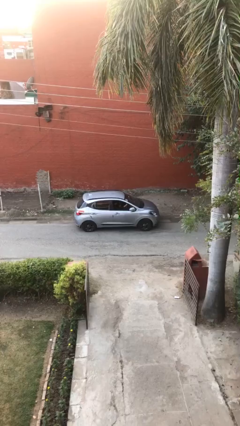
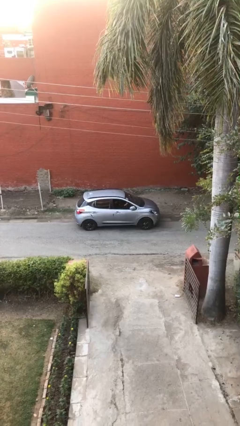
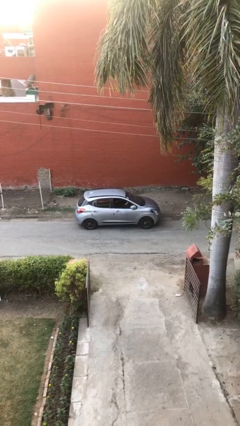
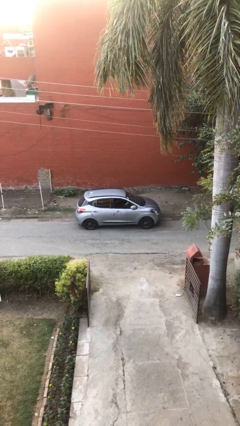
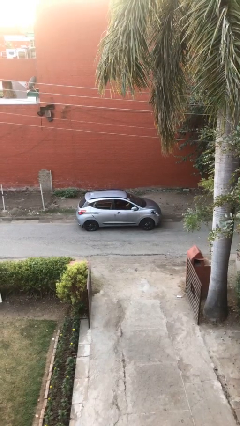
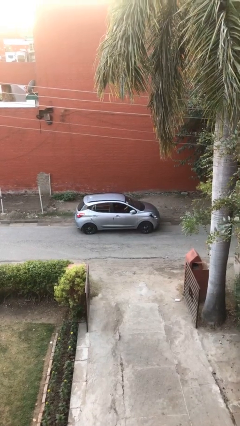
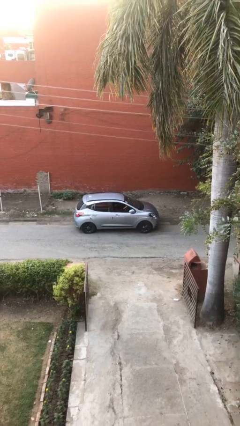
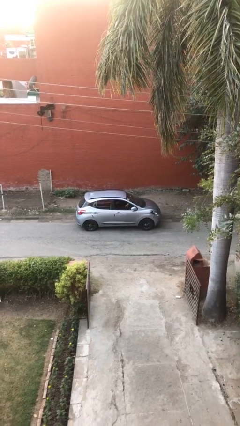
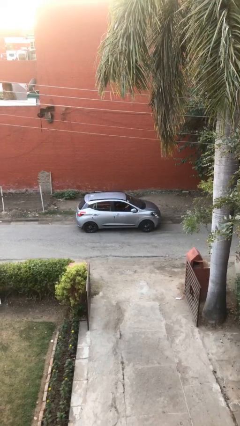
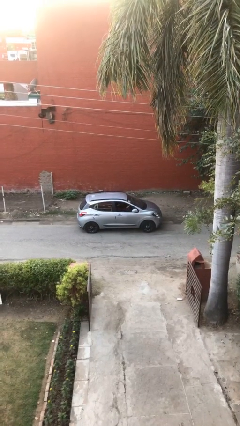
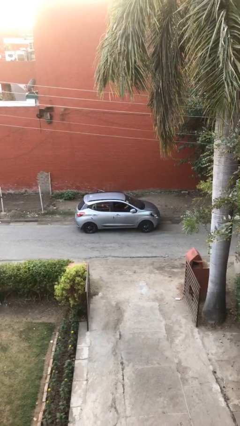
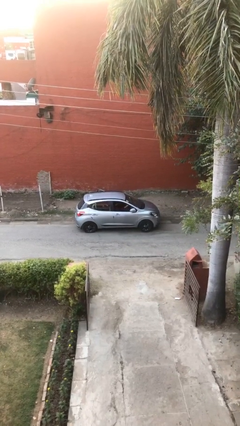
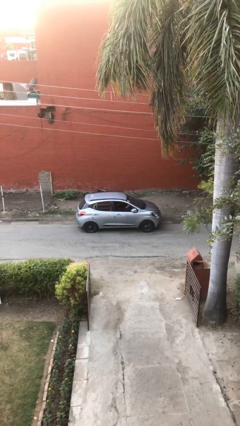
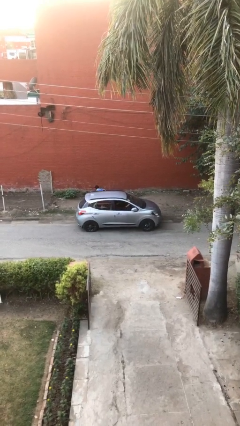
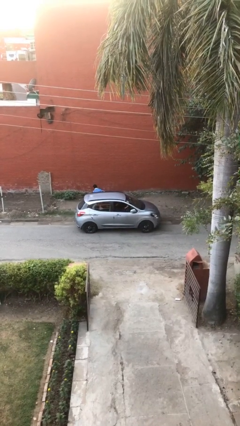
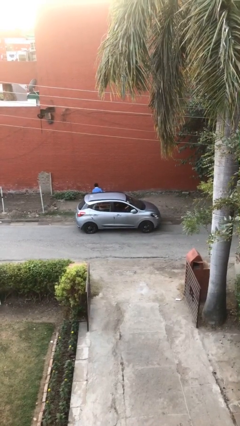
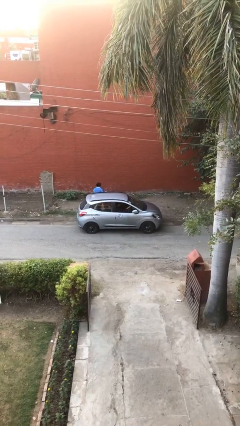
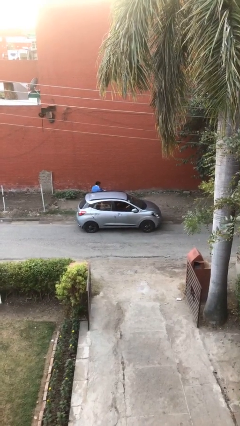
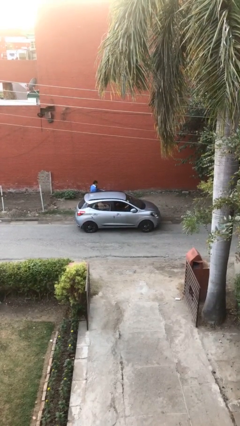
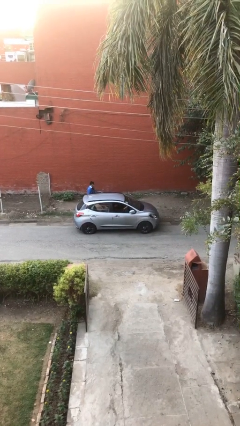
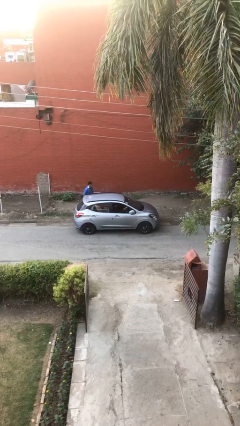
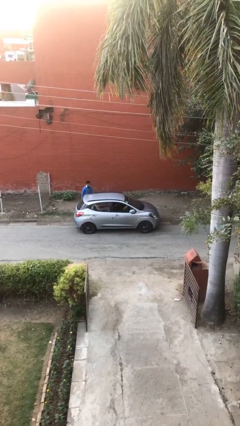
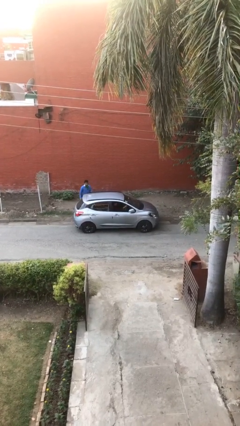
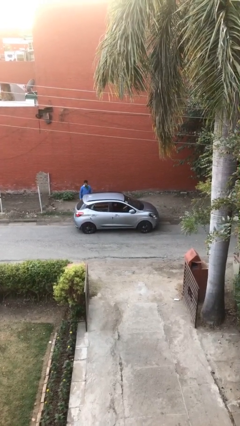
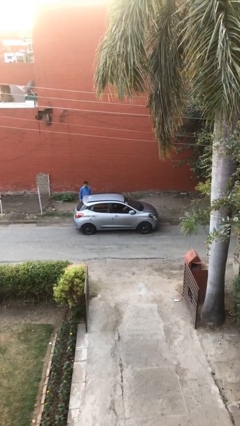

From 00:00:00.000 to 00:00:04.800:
car drops off person

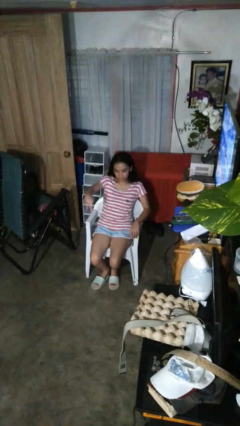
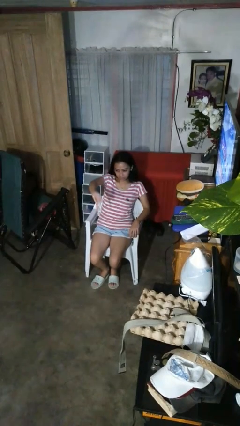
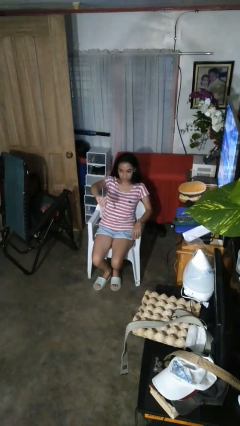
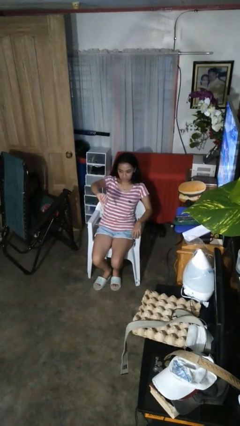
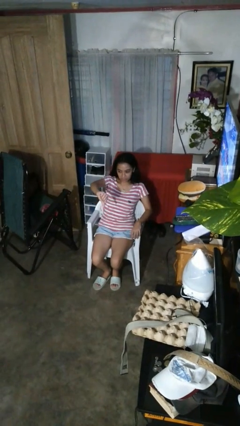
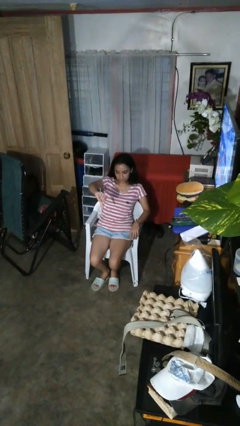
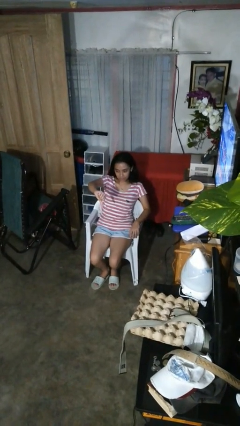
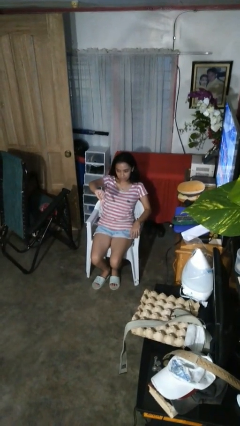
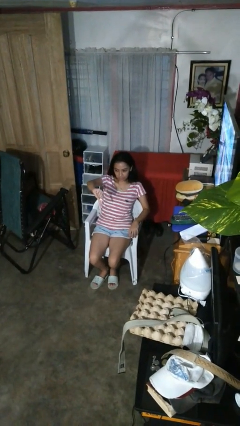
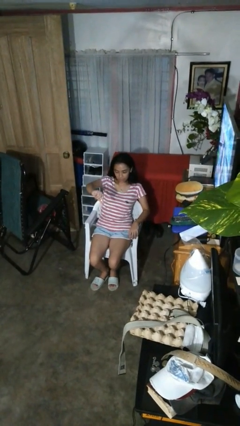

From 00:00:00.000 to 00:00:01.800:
person gestures thumbs down

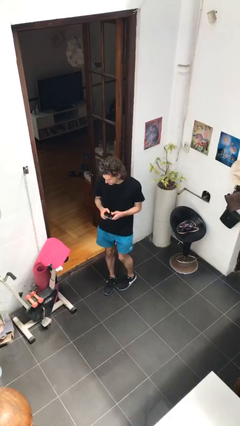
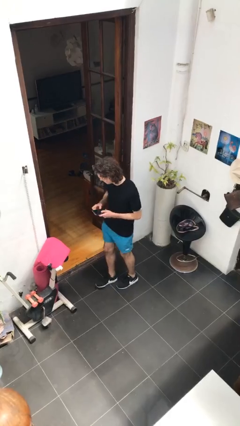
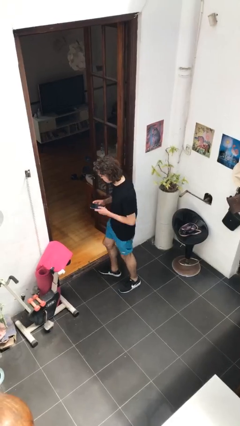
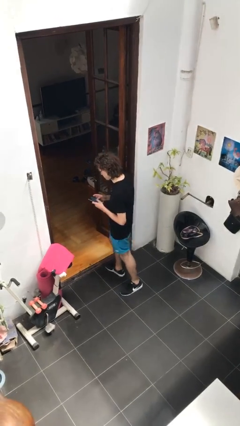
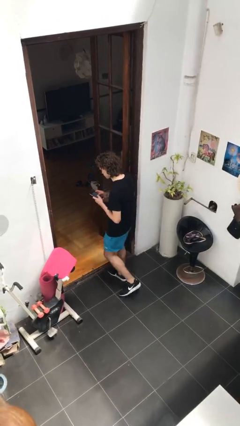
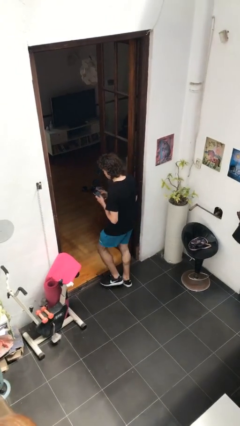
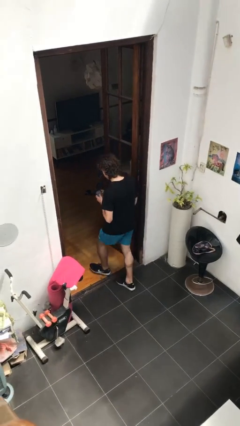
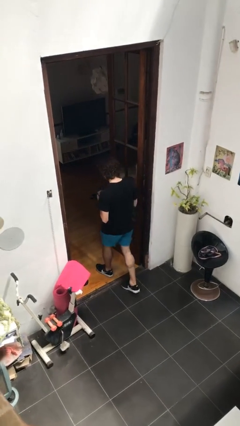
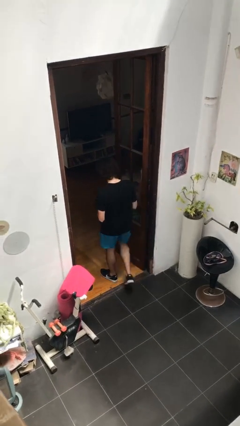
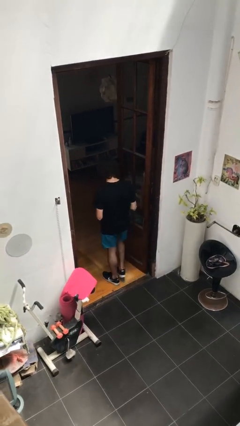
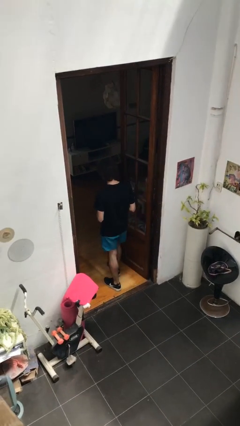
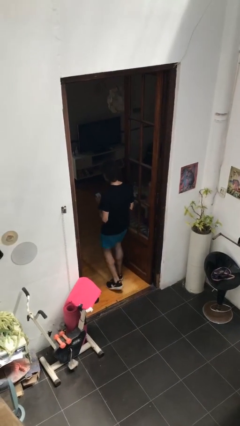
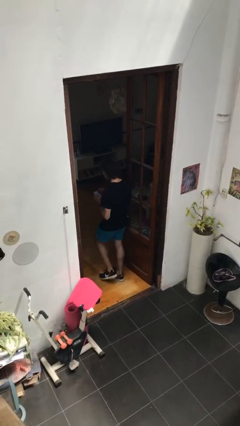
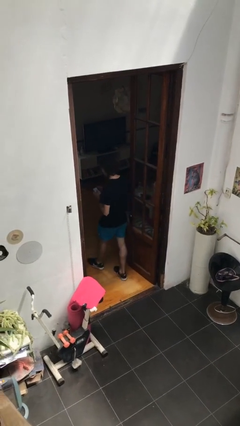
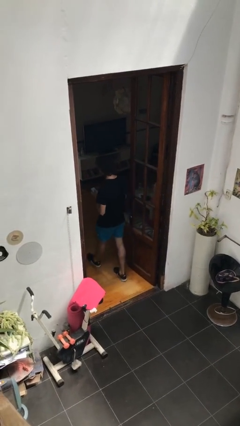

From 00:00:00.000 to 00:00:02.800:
person exits scene through structure

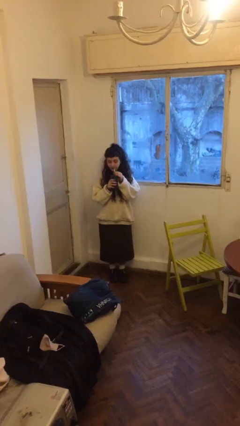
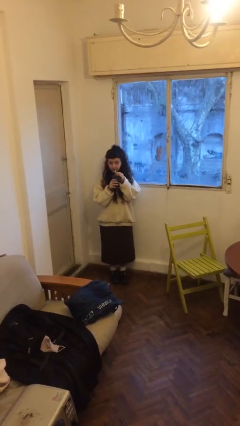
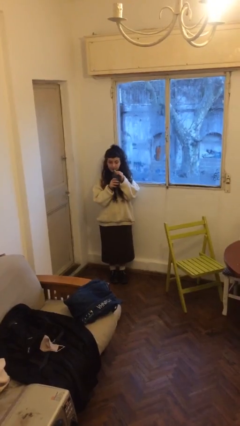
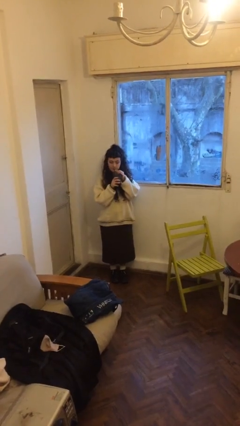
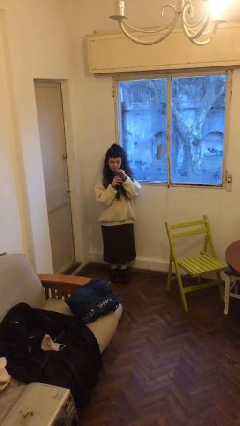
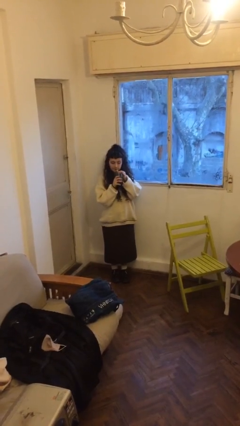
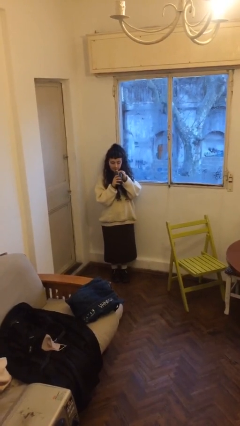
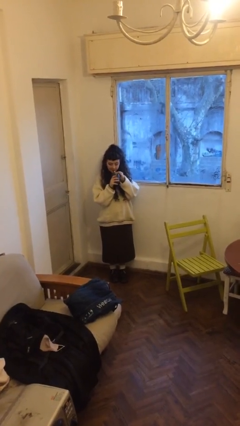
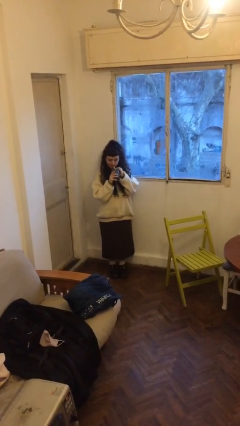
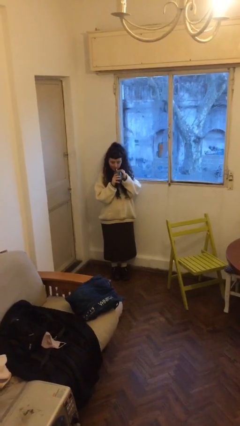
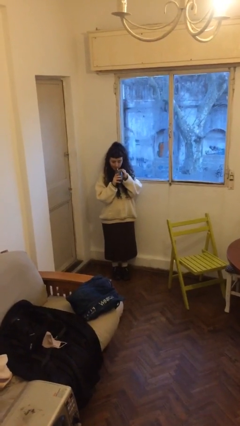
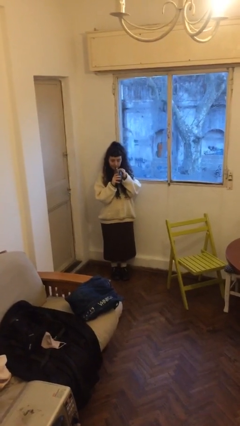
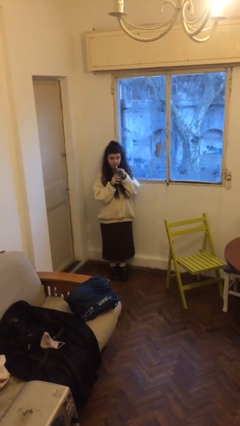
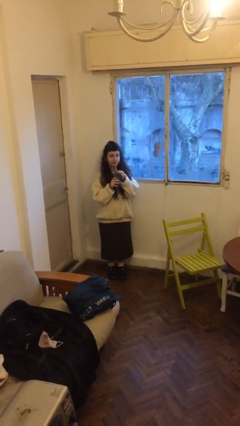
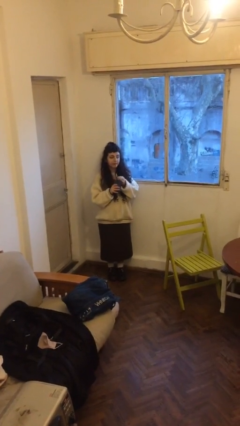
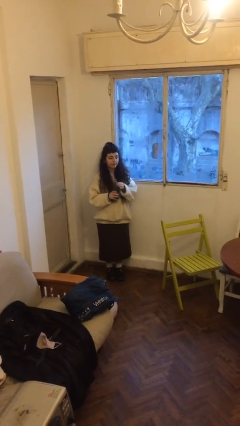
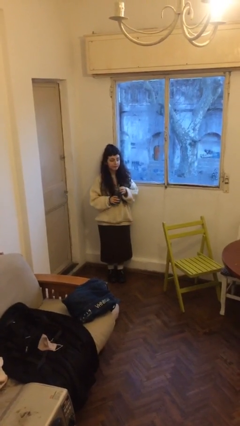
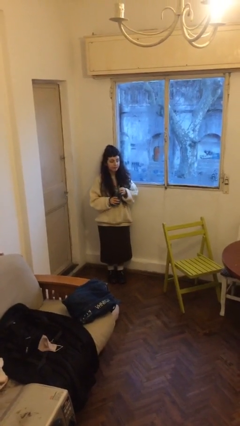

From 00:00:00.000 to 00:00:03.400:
person drinks from straw

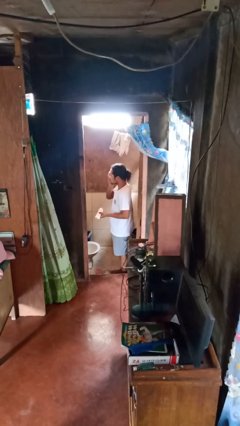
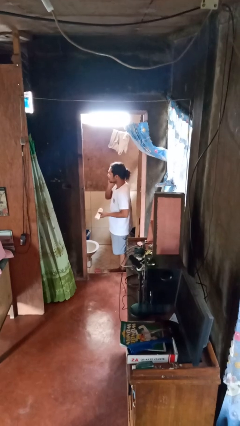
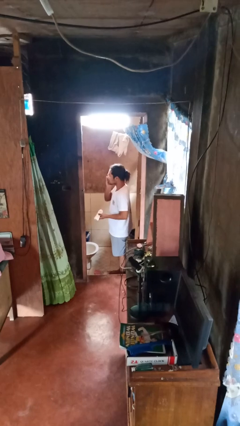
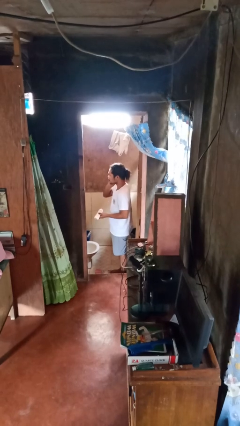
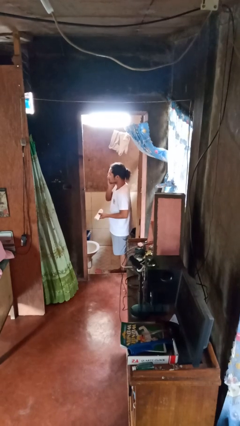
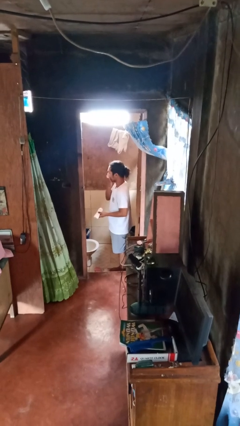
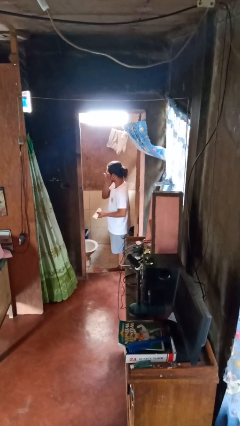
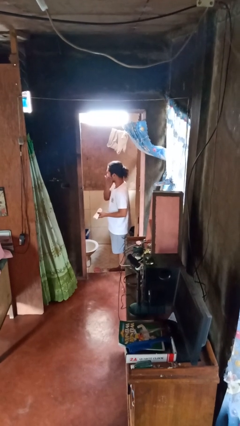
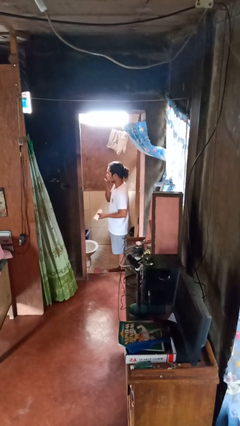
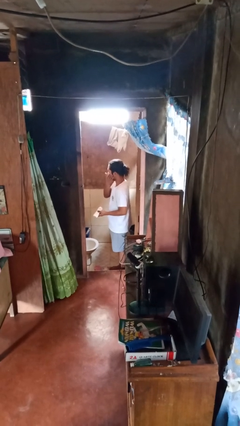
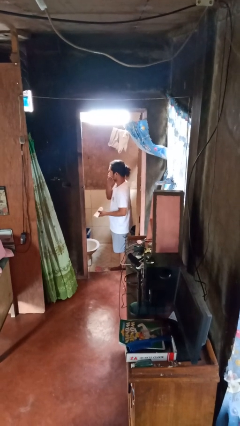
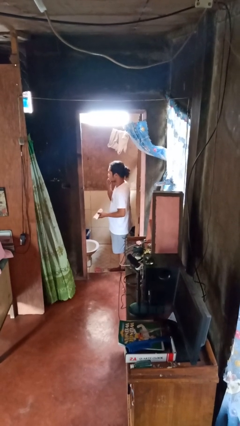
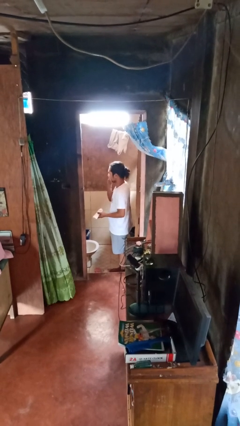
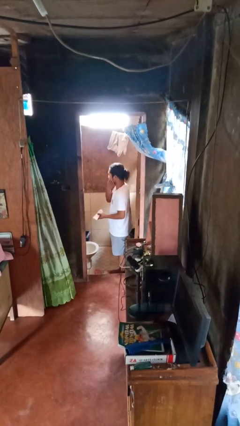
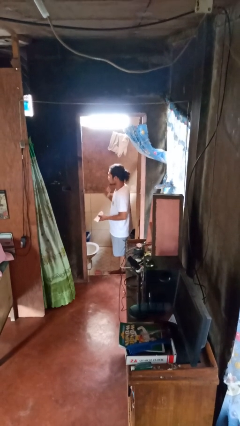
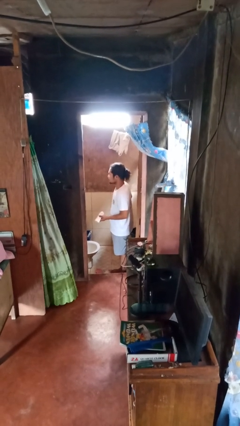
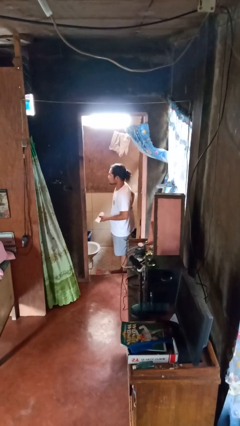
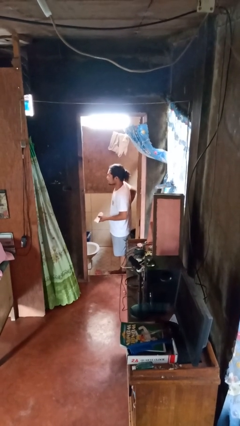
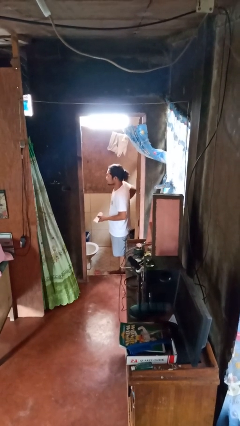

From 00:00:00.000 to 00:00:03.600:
person applies shaving cream

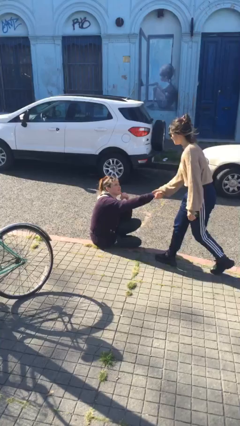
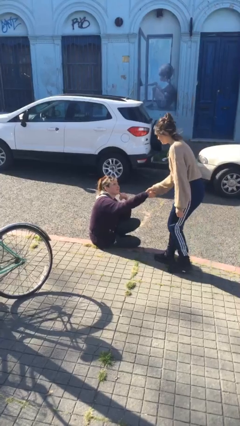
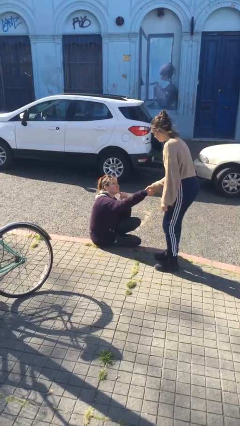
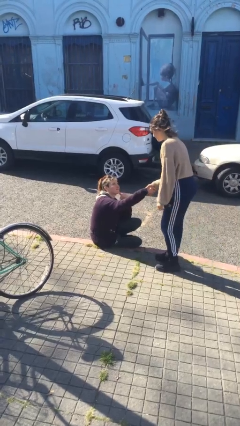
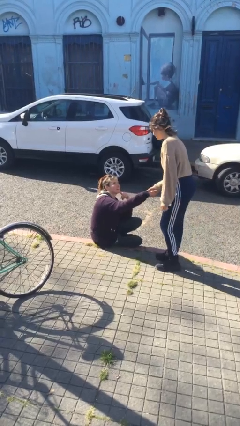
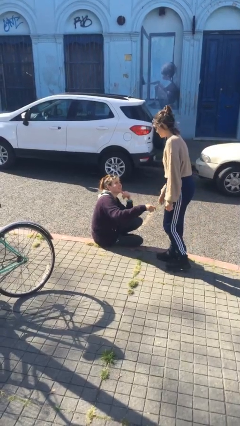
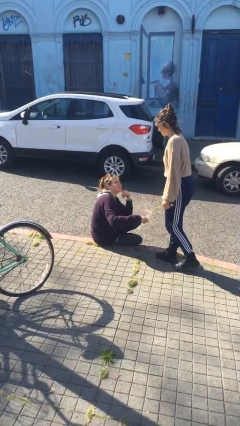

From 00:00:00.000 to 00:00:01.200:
person shakes hand

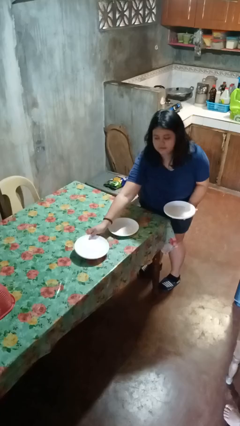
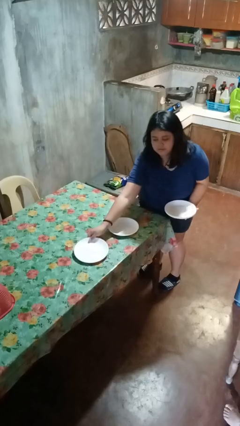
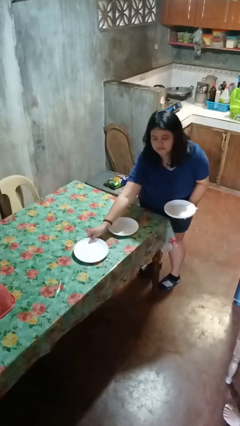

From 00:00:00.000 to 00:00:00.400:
person sets table
